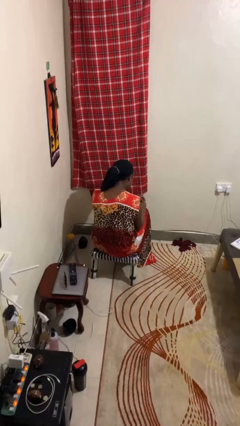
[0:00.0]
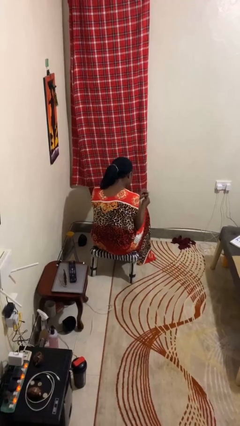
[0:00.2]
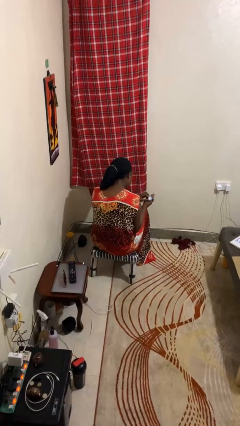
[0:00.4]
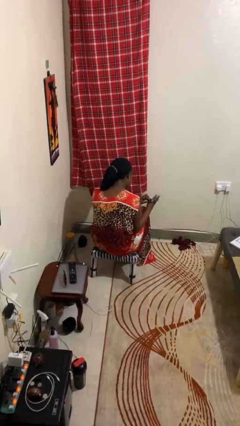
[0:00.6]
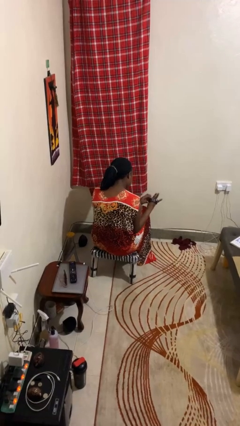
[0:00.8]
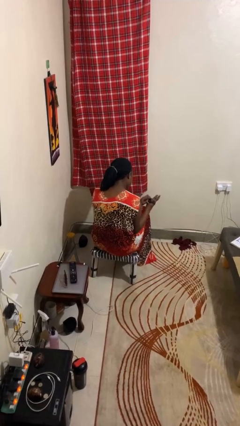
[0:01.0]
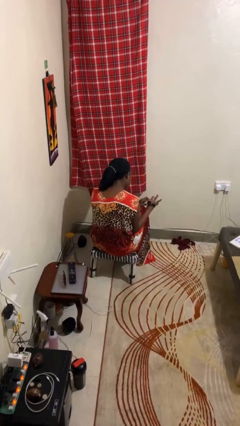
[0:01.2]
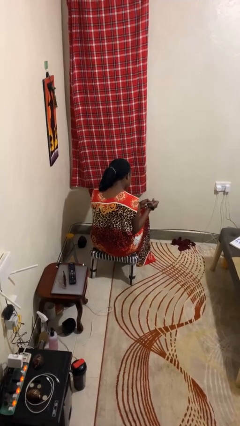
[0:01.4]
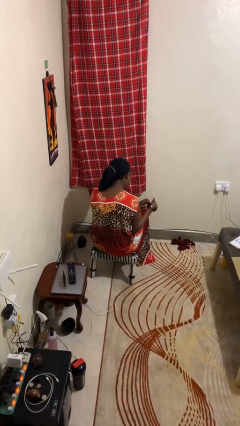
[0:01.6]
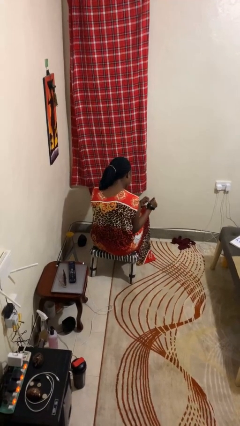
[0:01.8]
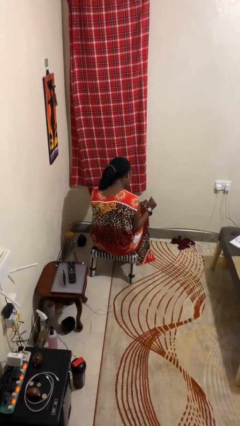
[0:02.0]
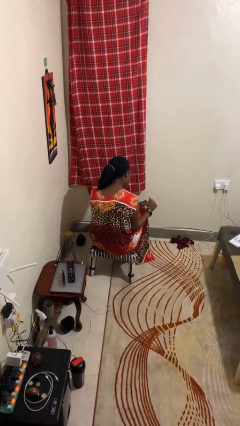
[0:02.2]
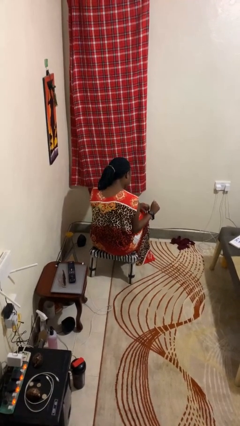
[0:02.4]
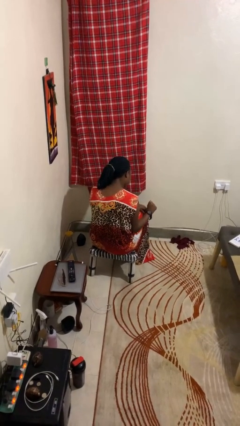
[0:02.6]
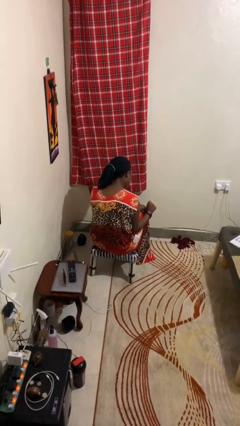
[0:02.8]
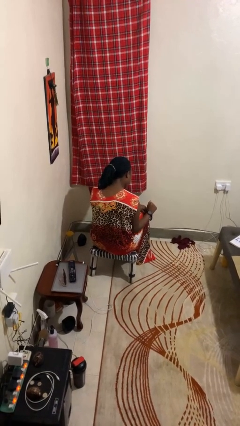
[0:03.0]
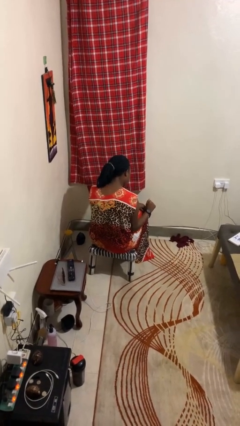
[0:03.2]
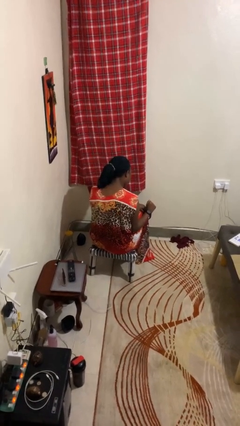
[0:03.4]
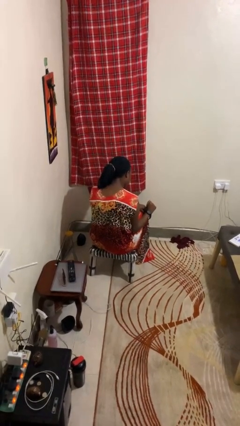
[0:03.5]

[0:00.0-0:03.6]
person puts on wristwatch

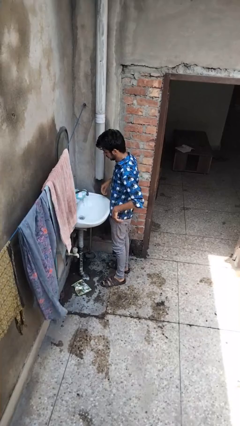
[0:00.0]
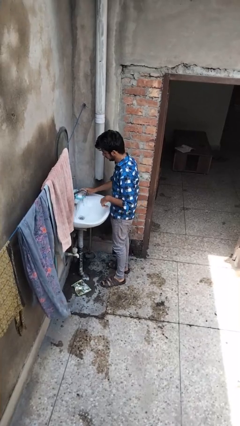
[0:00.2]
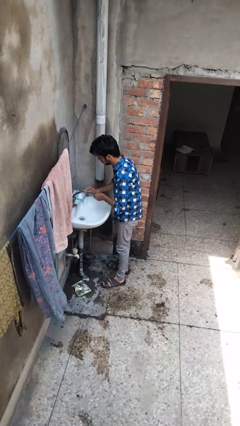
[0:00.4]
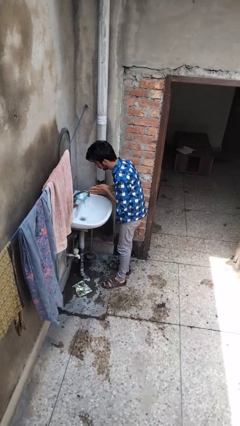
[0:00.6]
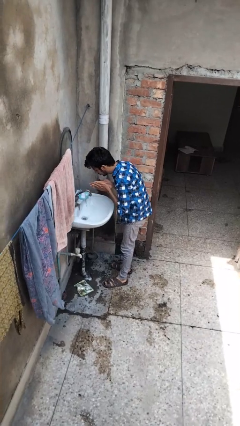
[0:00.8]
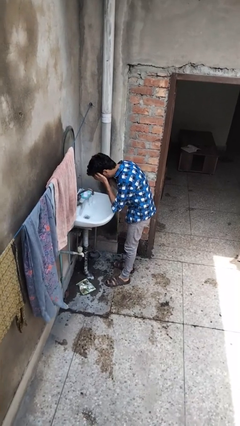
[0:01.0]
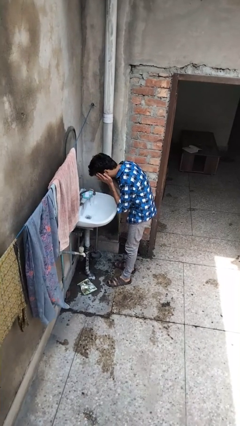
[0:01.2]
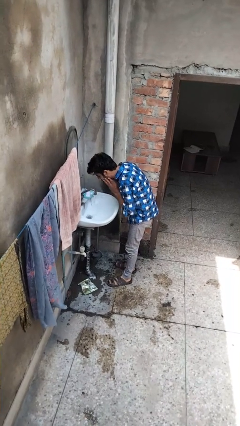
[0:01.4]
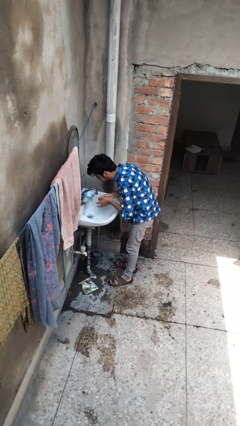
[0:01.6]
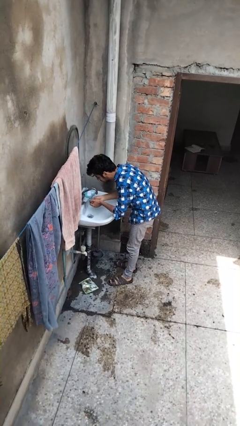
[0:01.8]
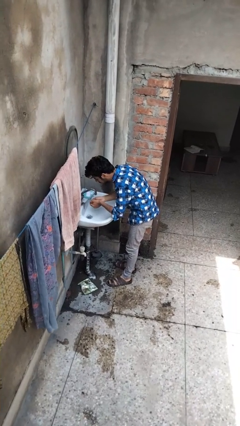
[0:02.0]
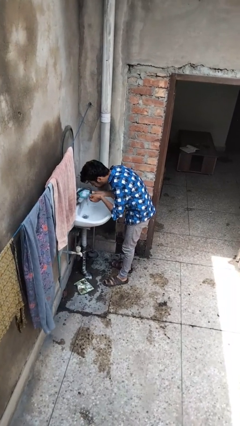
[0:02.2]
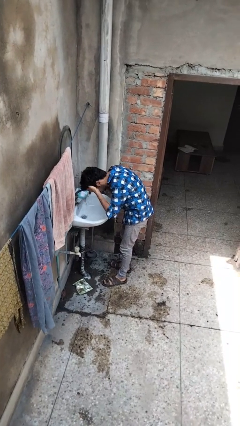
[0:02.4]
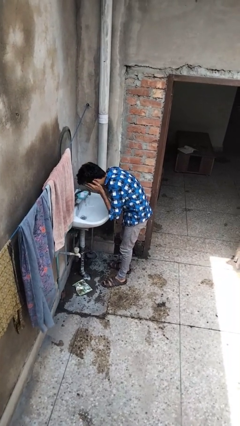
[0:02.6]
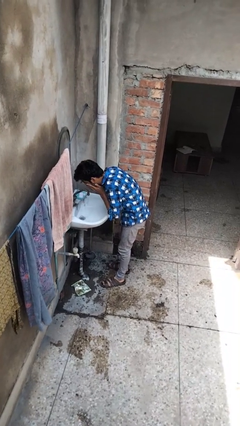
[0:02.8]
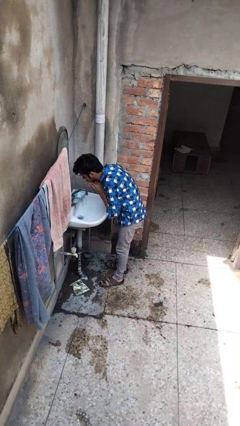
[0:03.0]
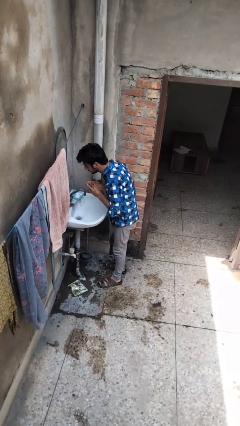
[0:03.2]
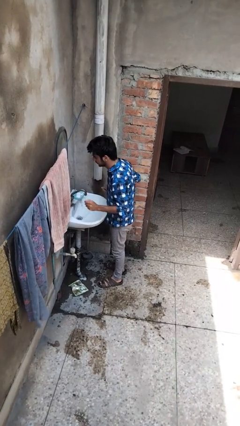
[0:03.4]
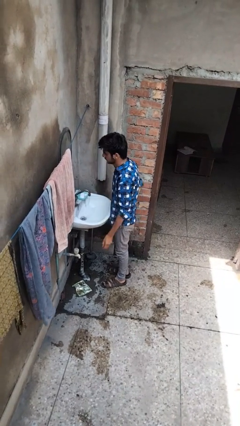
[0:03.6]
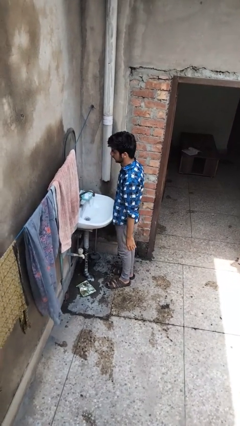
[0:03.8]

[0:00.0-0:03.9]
person washes face

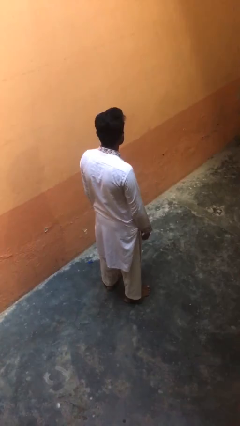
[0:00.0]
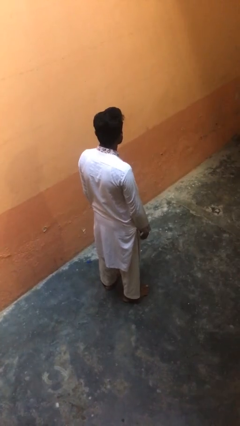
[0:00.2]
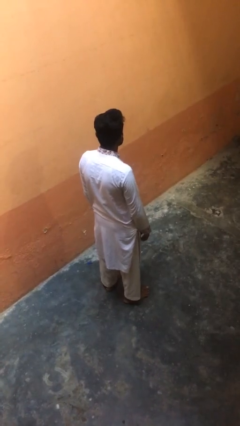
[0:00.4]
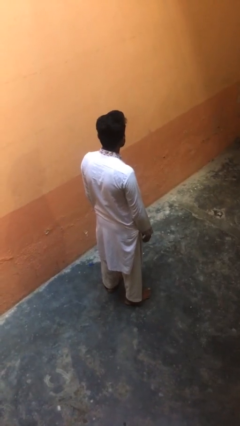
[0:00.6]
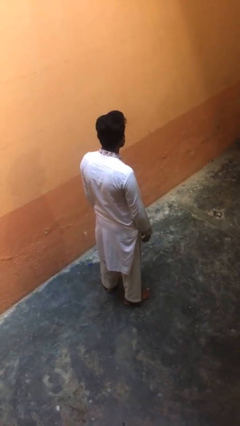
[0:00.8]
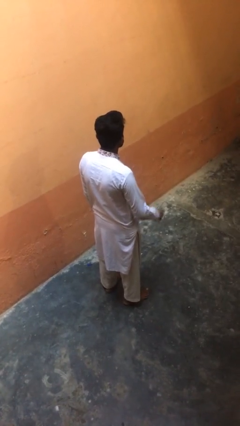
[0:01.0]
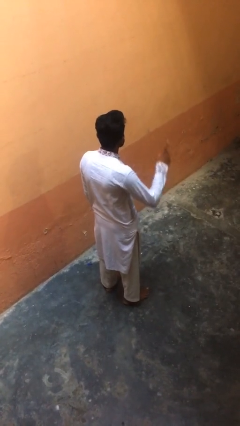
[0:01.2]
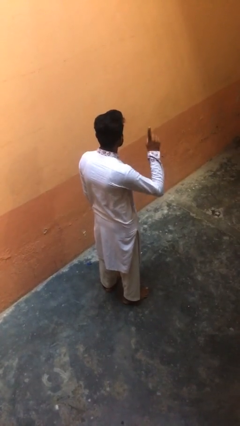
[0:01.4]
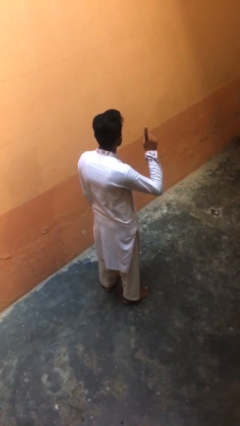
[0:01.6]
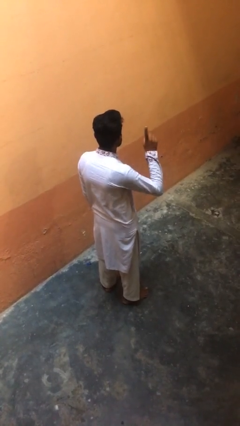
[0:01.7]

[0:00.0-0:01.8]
person gestures number one

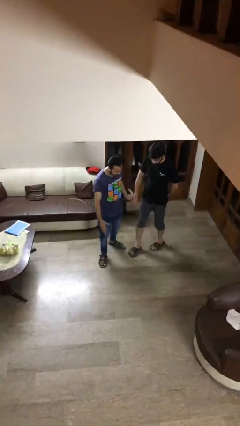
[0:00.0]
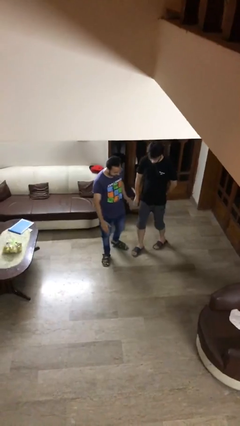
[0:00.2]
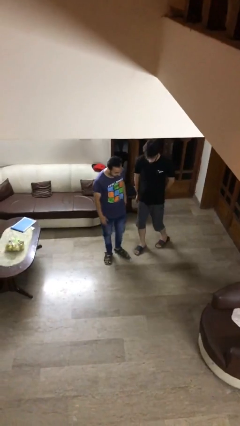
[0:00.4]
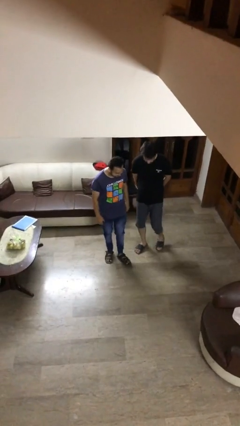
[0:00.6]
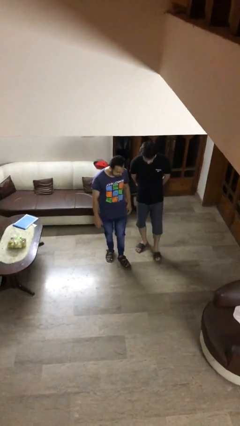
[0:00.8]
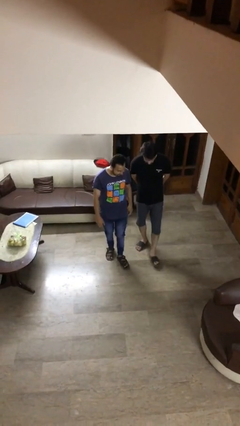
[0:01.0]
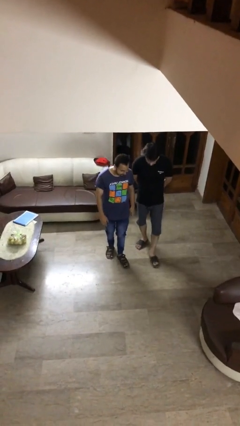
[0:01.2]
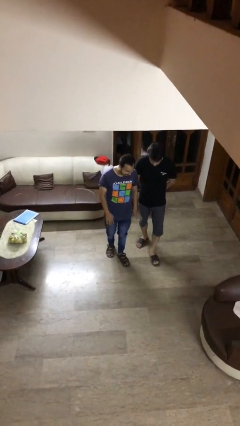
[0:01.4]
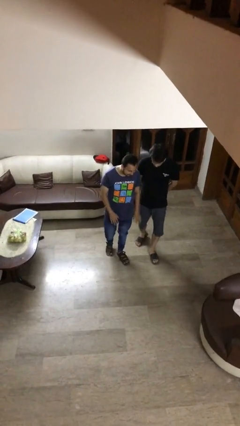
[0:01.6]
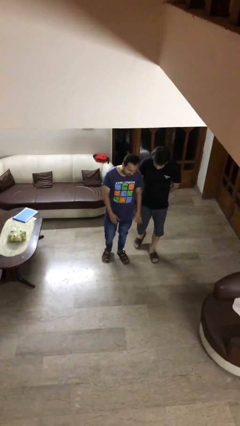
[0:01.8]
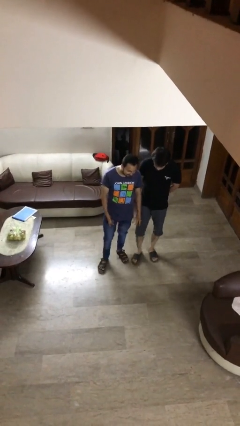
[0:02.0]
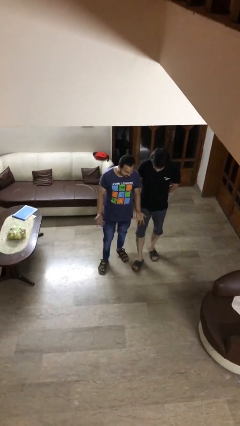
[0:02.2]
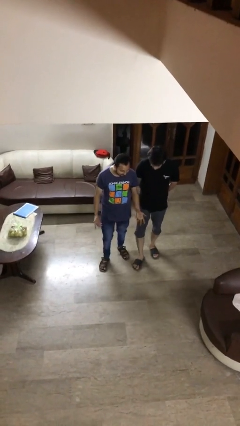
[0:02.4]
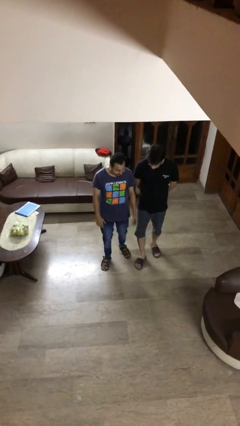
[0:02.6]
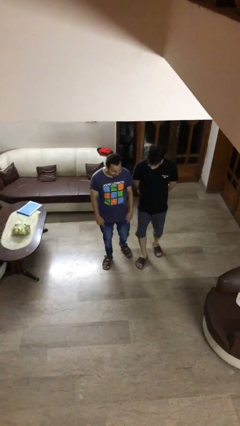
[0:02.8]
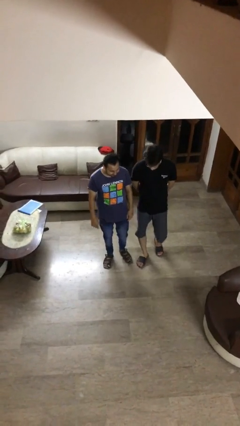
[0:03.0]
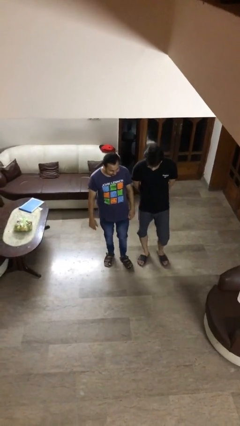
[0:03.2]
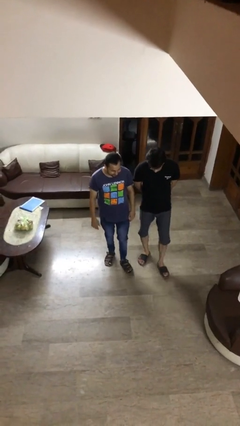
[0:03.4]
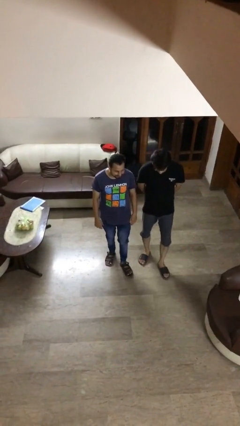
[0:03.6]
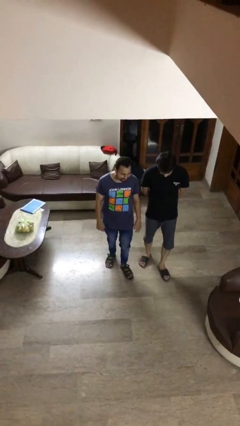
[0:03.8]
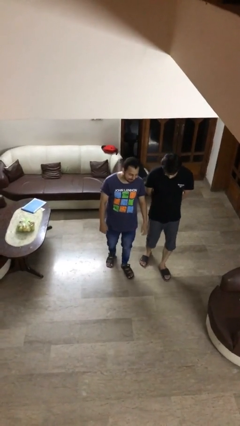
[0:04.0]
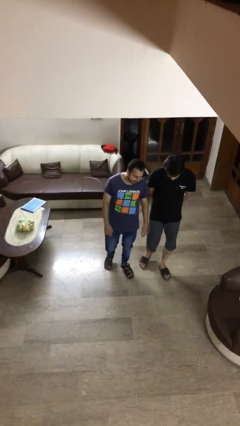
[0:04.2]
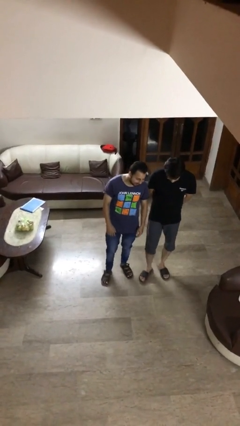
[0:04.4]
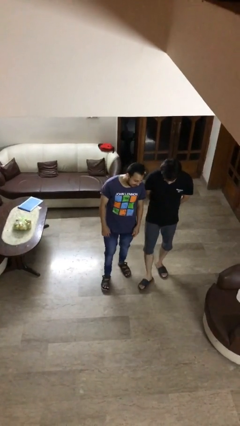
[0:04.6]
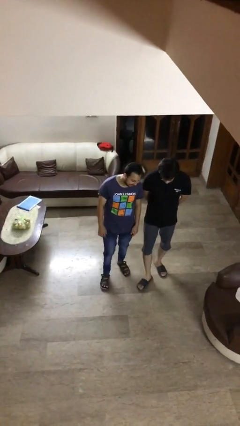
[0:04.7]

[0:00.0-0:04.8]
person talks to person

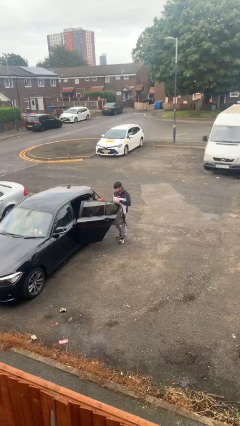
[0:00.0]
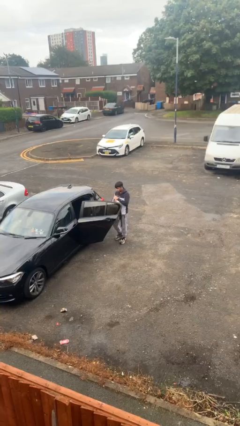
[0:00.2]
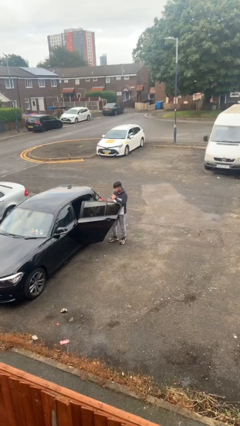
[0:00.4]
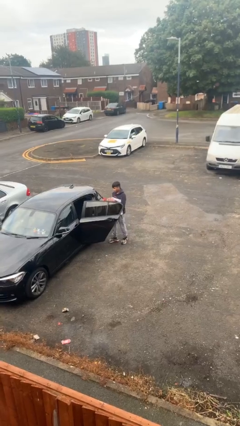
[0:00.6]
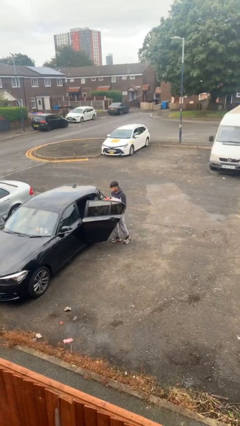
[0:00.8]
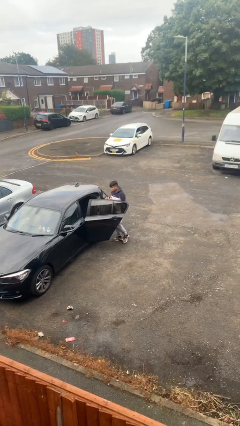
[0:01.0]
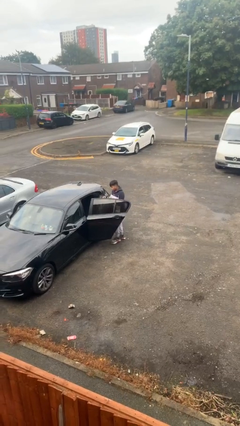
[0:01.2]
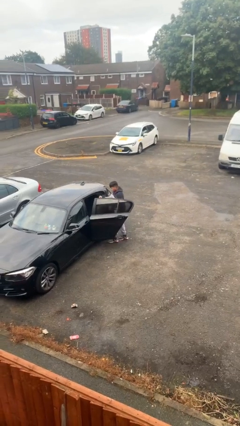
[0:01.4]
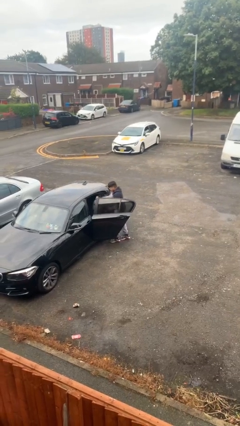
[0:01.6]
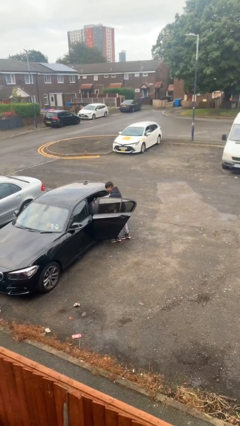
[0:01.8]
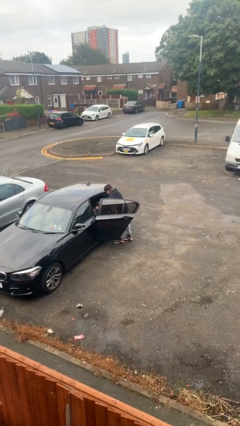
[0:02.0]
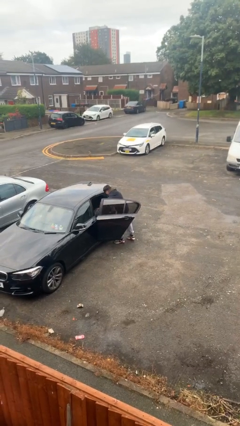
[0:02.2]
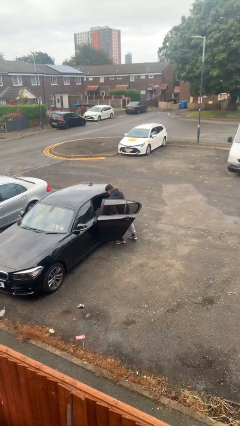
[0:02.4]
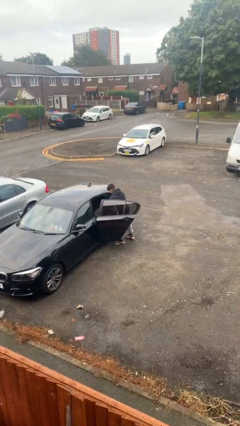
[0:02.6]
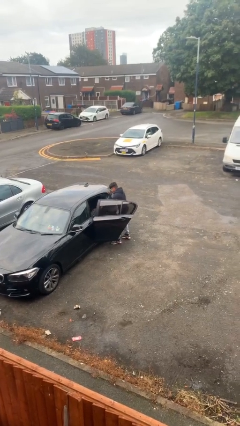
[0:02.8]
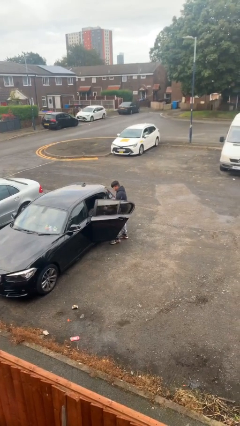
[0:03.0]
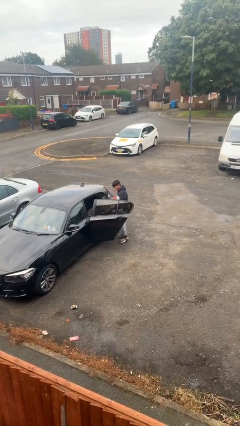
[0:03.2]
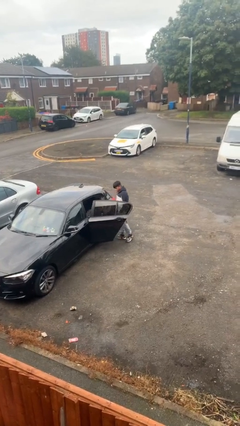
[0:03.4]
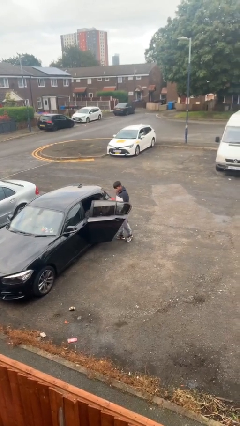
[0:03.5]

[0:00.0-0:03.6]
person loads car
